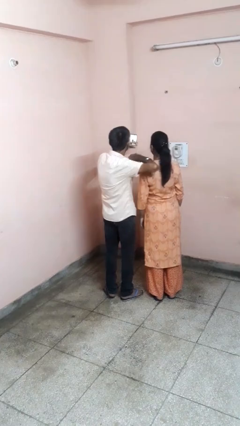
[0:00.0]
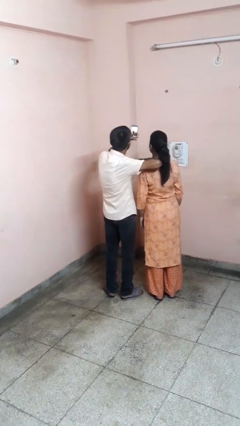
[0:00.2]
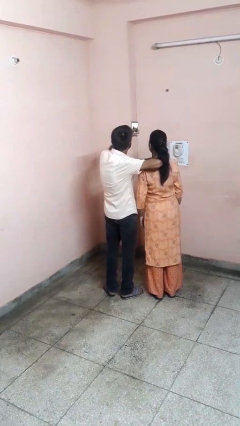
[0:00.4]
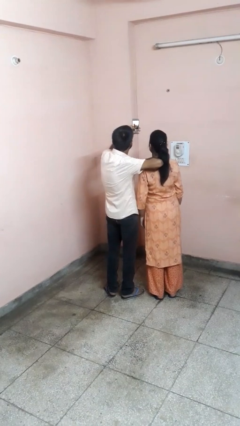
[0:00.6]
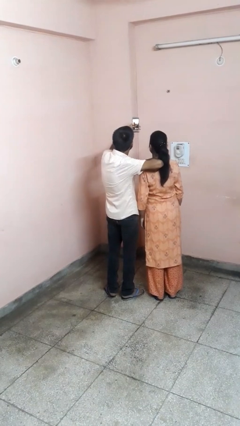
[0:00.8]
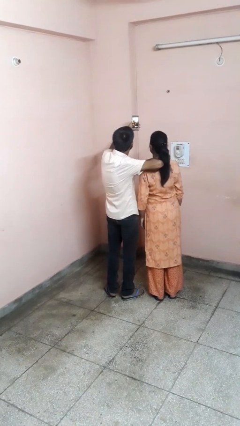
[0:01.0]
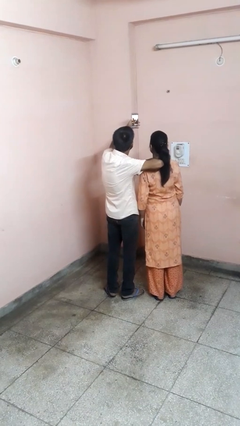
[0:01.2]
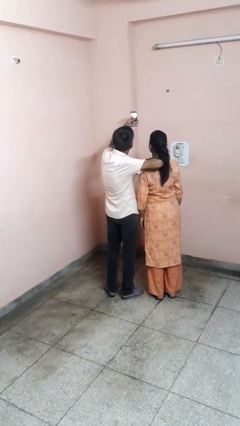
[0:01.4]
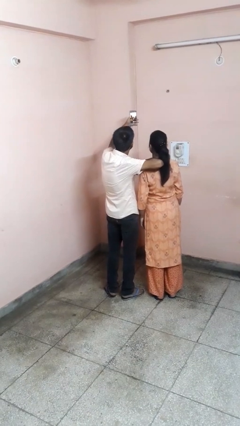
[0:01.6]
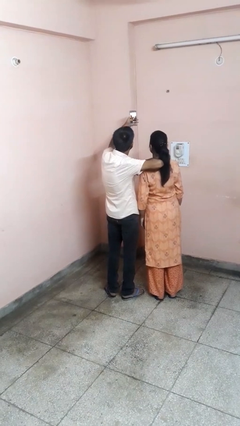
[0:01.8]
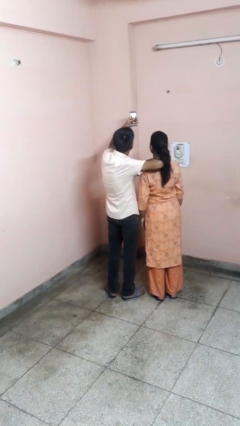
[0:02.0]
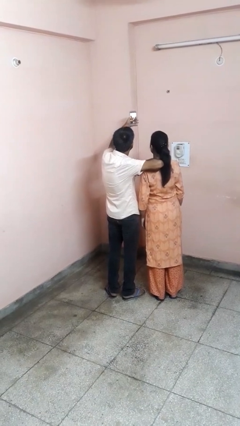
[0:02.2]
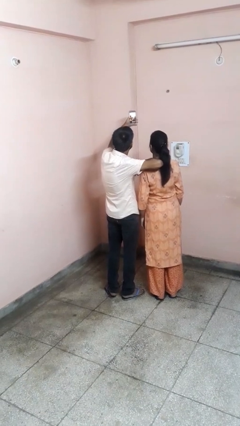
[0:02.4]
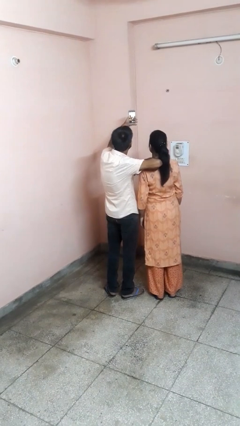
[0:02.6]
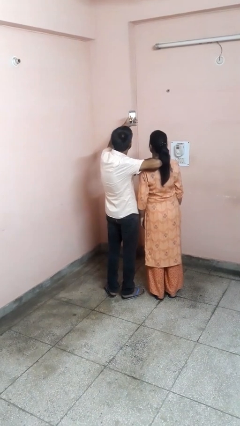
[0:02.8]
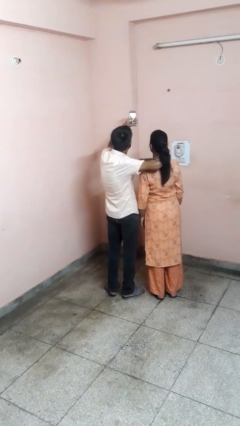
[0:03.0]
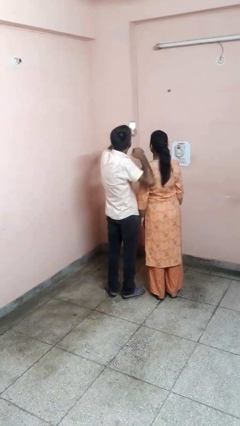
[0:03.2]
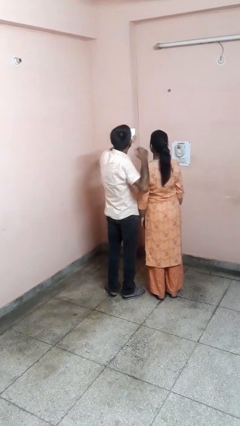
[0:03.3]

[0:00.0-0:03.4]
person takes selfie with person

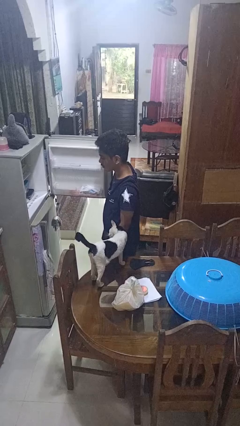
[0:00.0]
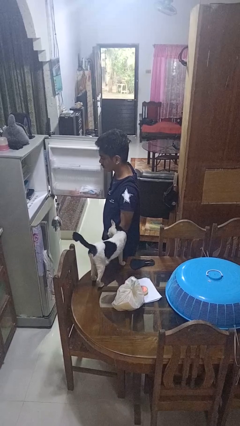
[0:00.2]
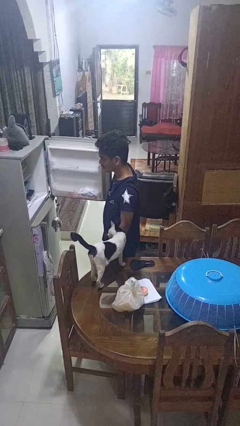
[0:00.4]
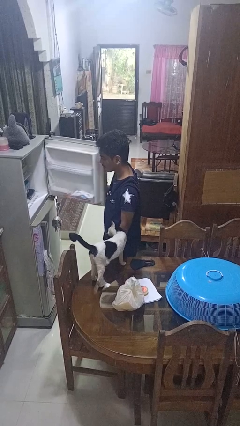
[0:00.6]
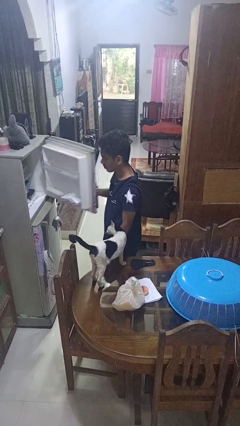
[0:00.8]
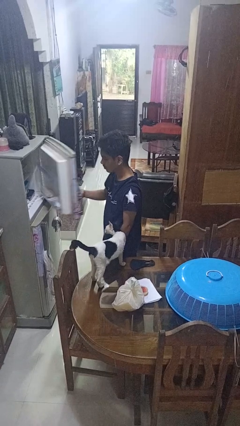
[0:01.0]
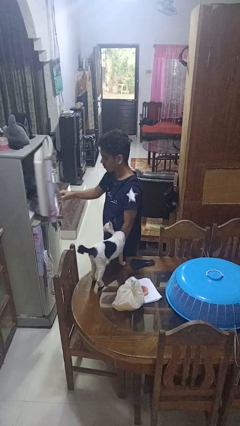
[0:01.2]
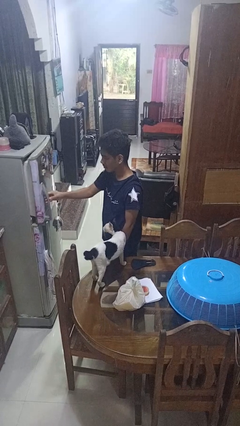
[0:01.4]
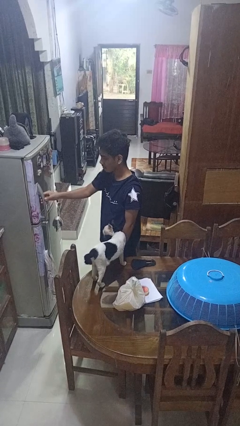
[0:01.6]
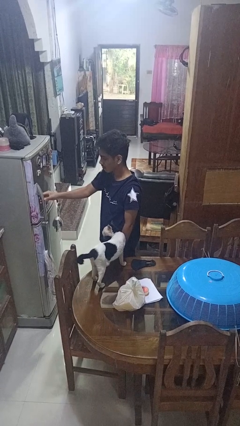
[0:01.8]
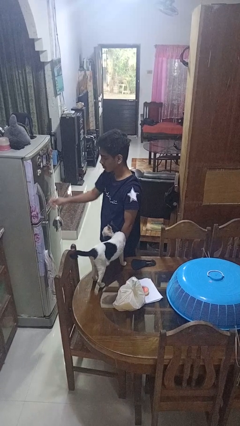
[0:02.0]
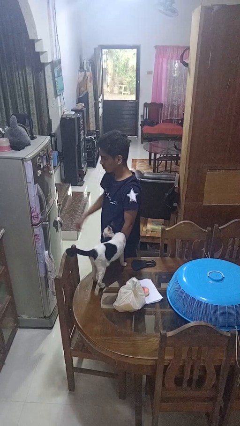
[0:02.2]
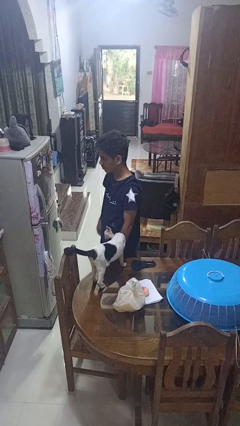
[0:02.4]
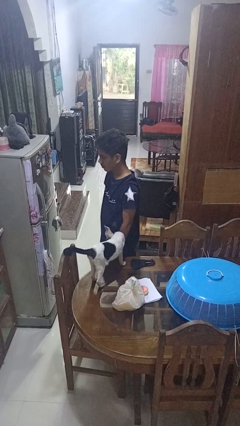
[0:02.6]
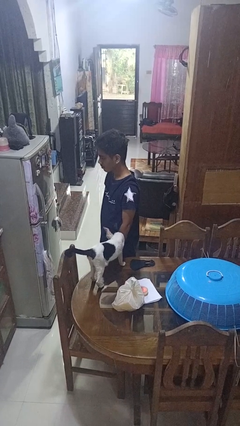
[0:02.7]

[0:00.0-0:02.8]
person closes refrigerator

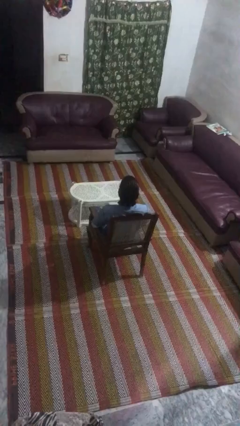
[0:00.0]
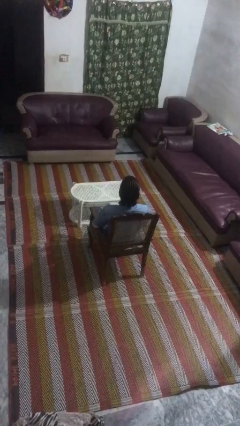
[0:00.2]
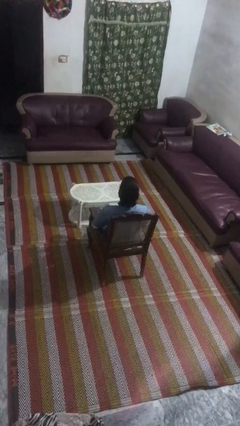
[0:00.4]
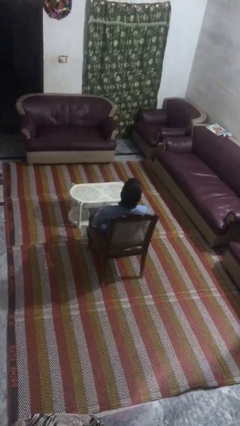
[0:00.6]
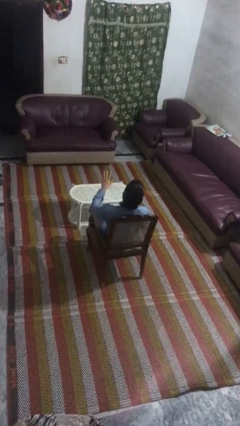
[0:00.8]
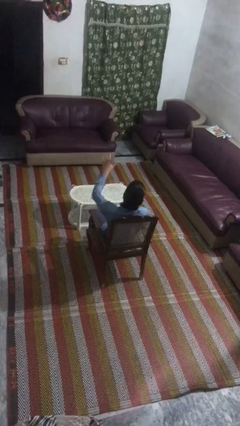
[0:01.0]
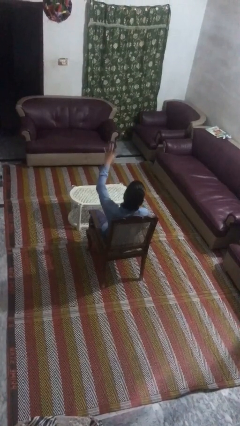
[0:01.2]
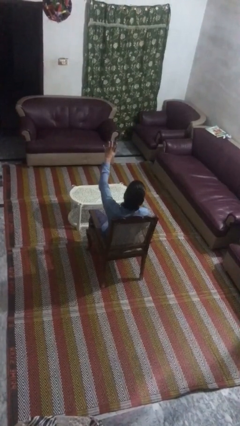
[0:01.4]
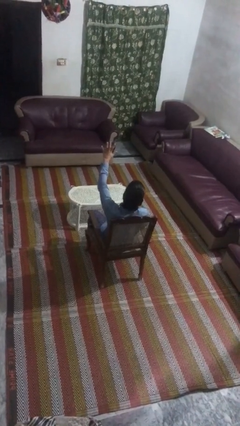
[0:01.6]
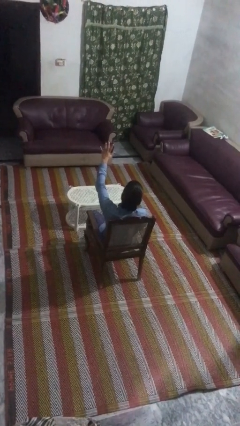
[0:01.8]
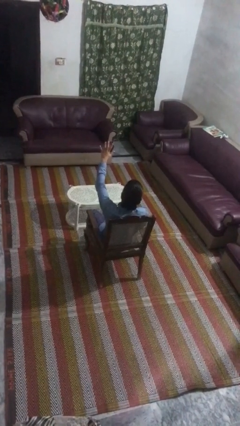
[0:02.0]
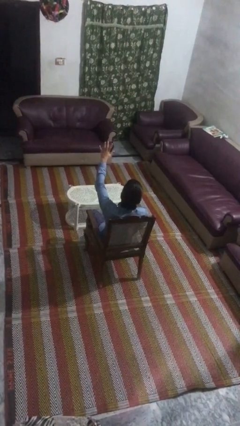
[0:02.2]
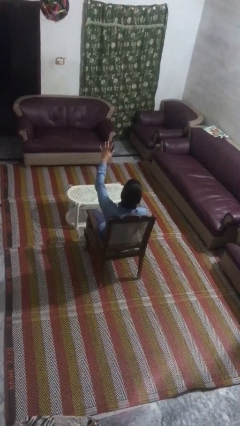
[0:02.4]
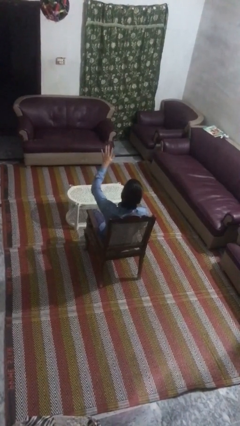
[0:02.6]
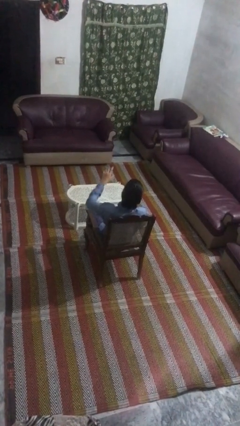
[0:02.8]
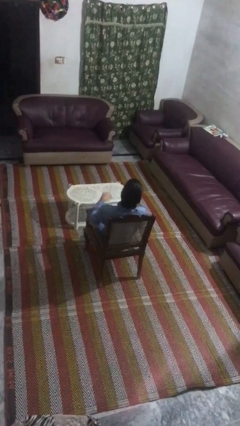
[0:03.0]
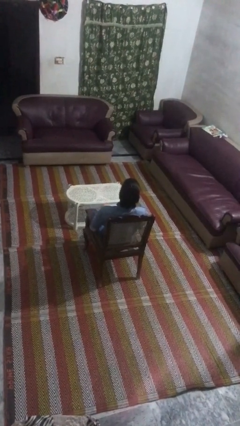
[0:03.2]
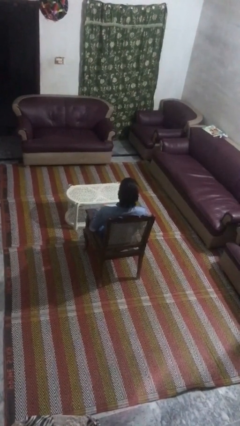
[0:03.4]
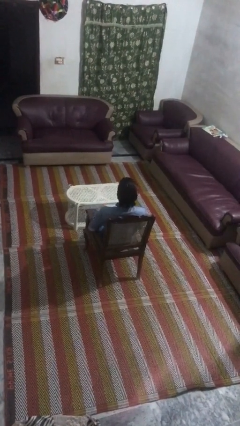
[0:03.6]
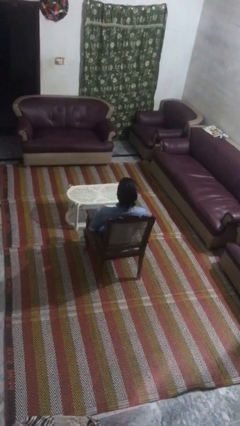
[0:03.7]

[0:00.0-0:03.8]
person gestures number five

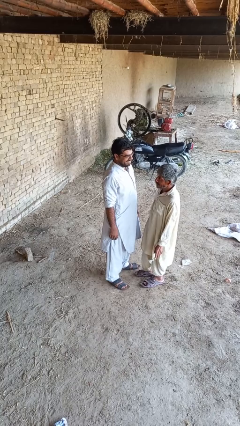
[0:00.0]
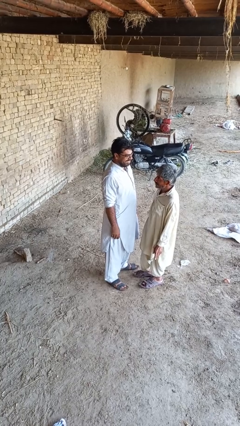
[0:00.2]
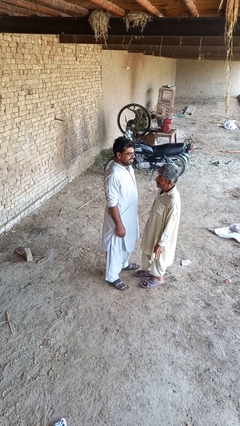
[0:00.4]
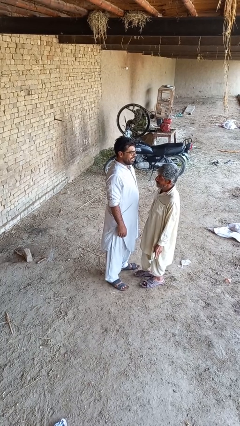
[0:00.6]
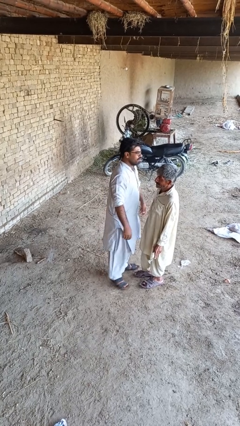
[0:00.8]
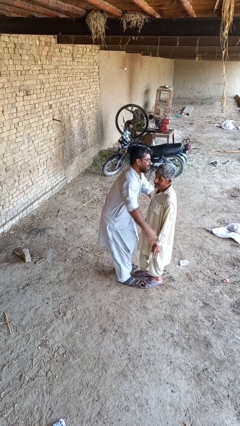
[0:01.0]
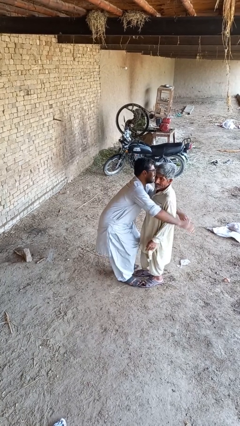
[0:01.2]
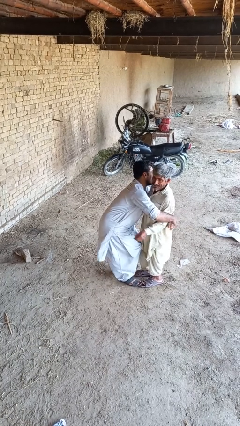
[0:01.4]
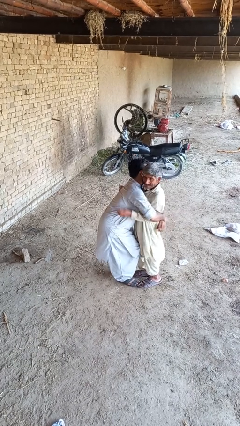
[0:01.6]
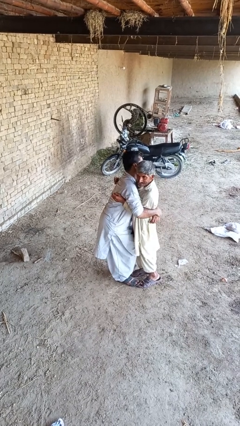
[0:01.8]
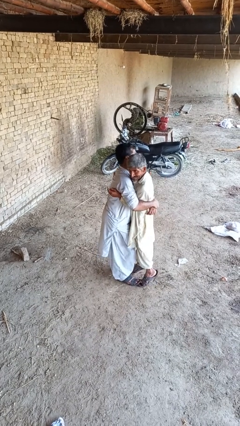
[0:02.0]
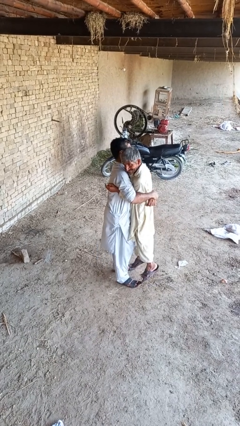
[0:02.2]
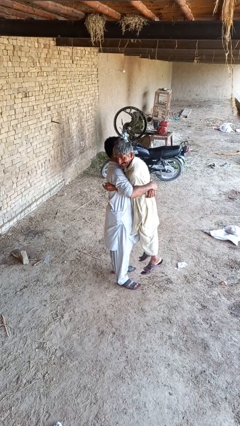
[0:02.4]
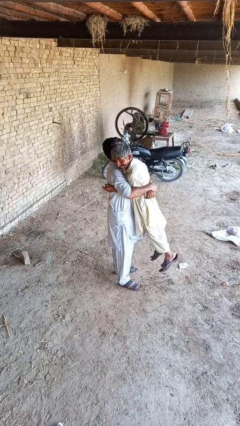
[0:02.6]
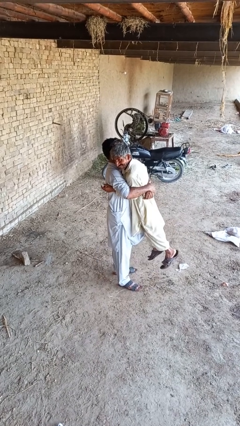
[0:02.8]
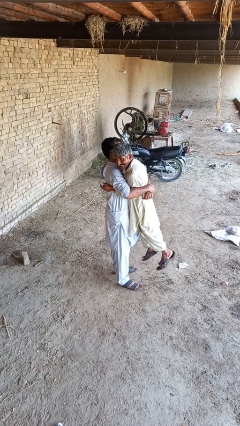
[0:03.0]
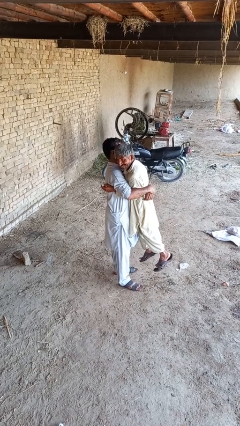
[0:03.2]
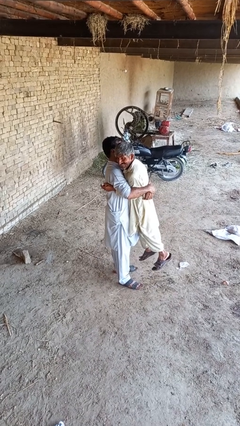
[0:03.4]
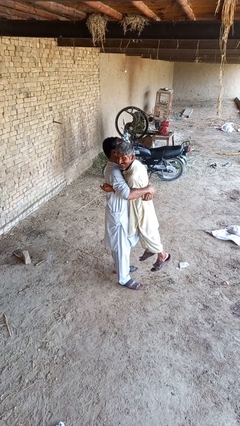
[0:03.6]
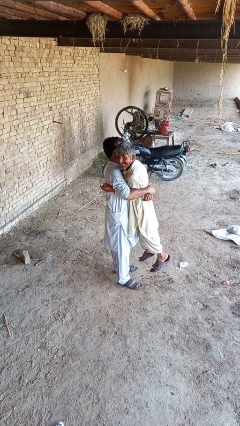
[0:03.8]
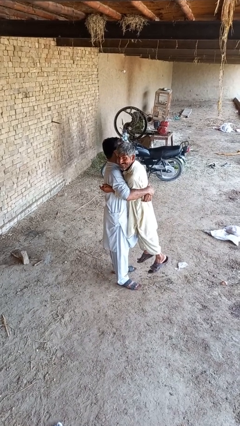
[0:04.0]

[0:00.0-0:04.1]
person picks up person

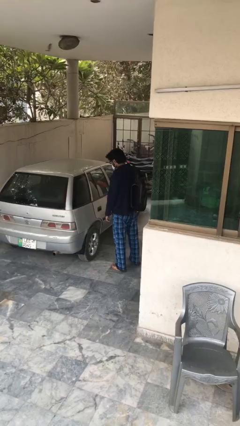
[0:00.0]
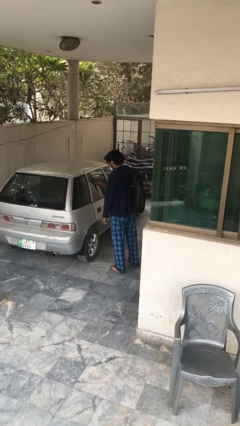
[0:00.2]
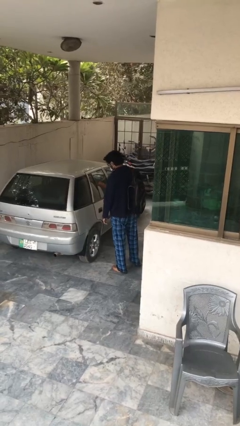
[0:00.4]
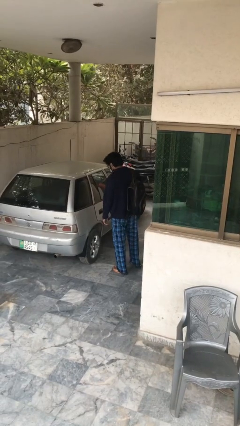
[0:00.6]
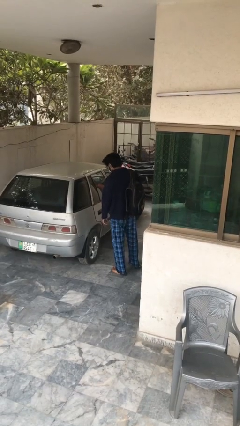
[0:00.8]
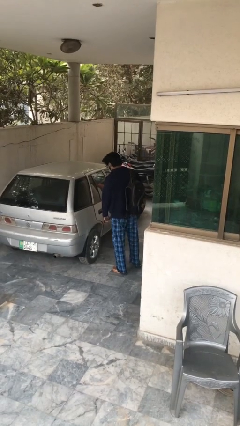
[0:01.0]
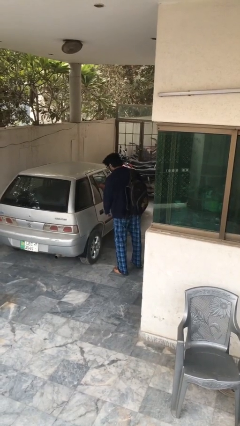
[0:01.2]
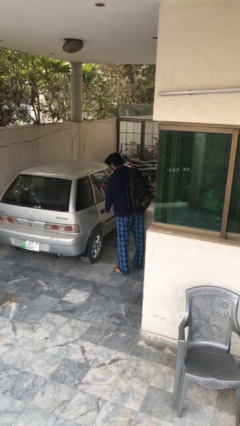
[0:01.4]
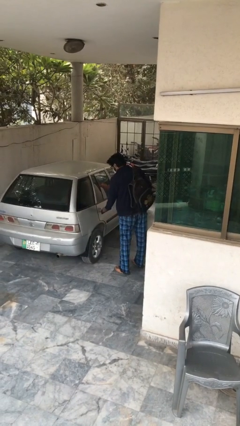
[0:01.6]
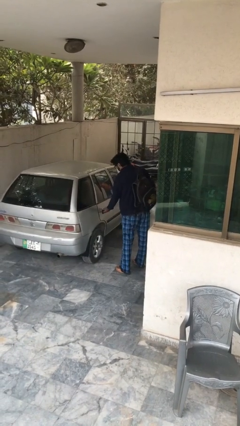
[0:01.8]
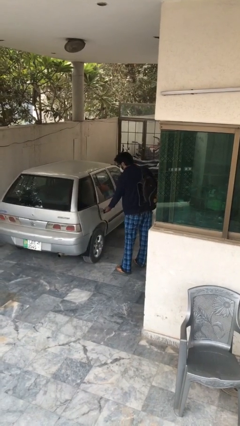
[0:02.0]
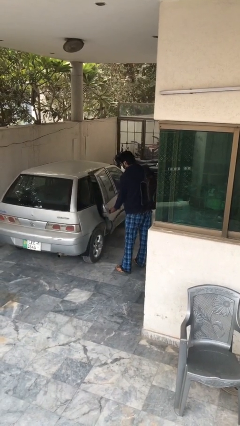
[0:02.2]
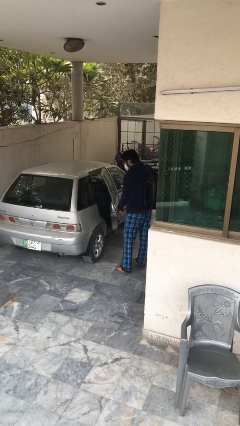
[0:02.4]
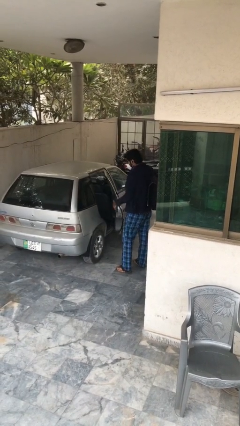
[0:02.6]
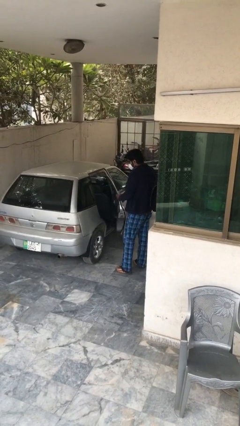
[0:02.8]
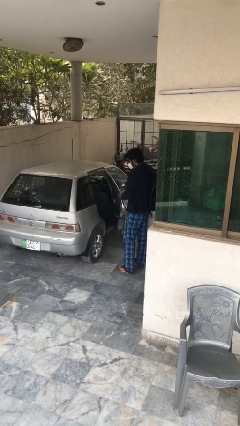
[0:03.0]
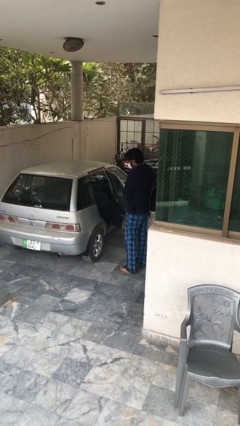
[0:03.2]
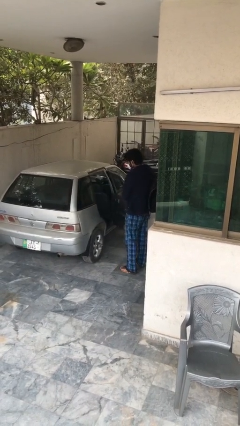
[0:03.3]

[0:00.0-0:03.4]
person opens car door
